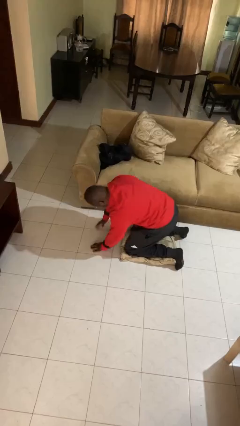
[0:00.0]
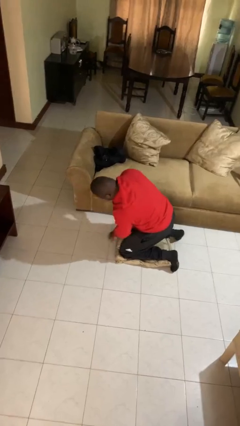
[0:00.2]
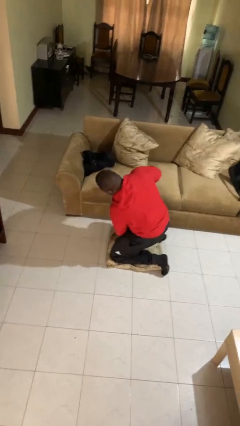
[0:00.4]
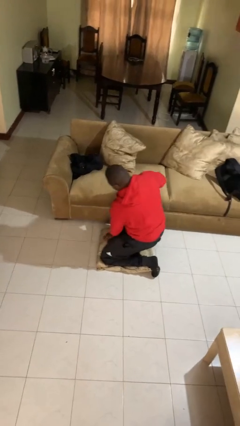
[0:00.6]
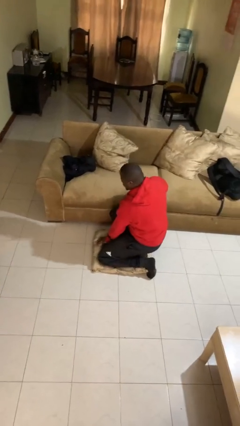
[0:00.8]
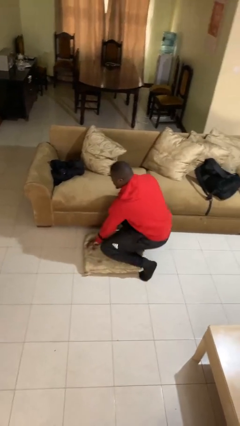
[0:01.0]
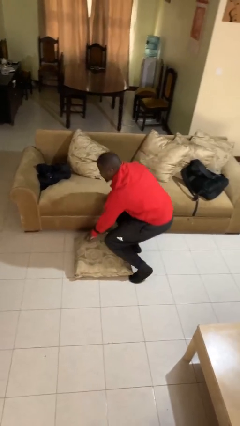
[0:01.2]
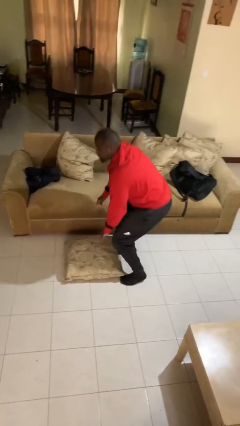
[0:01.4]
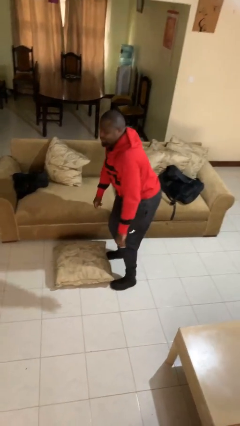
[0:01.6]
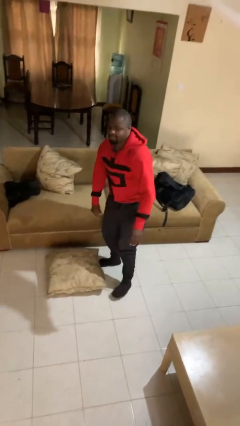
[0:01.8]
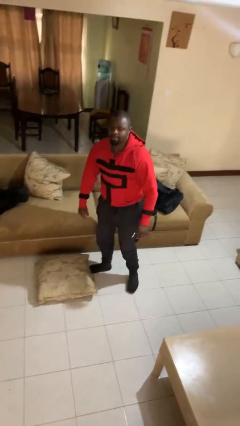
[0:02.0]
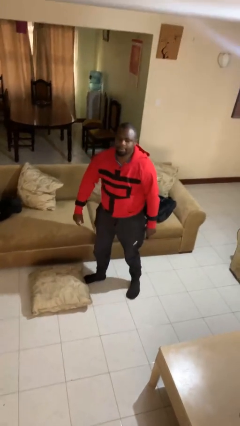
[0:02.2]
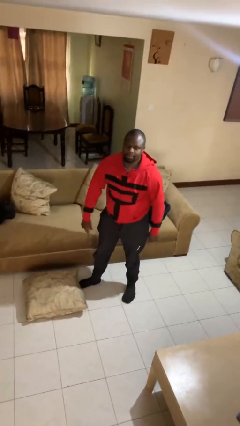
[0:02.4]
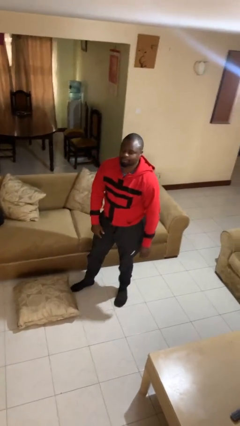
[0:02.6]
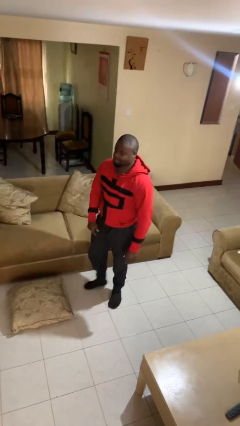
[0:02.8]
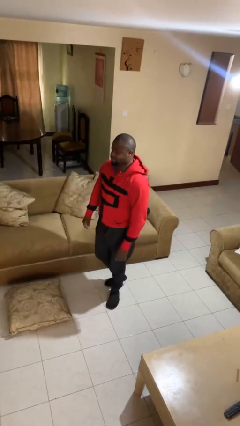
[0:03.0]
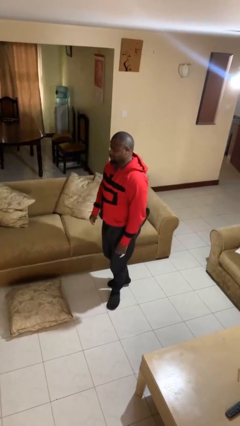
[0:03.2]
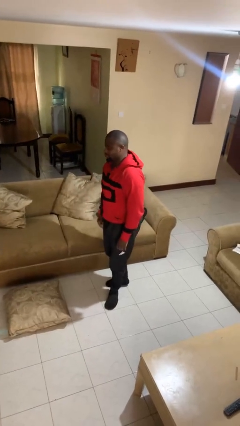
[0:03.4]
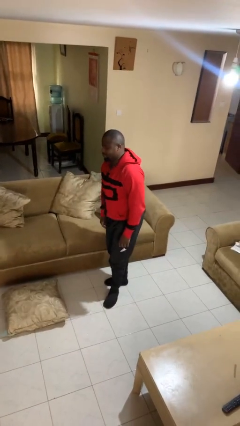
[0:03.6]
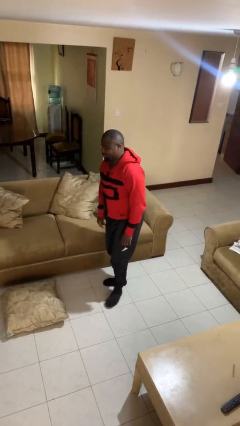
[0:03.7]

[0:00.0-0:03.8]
person stands up from floor

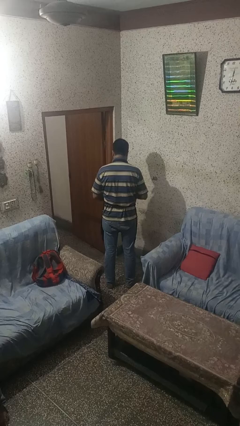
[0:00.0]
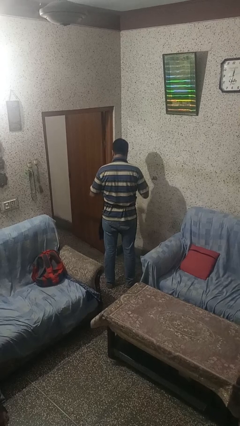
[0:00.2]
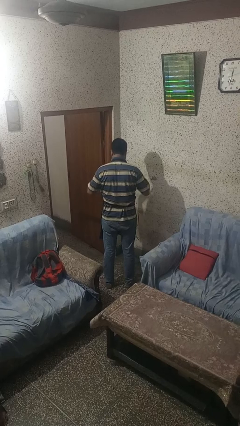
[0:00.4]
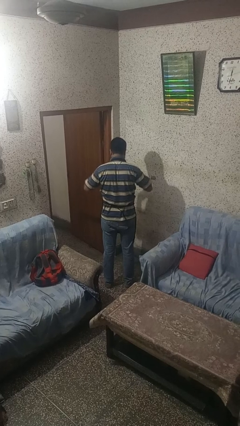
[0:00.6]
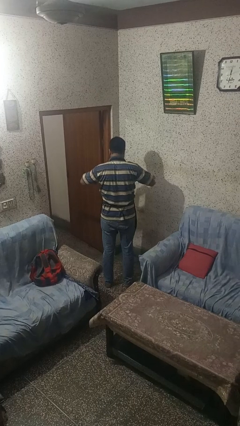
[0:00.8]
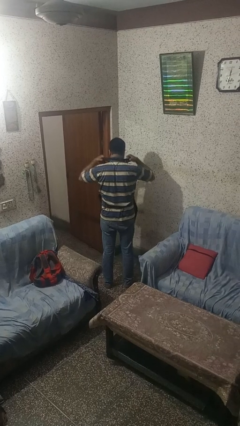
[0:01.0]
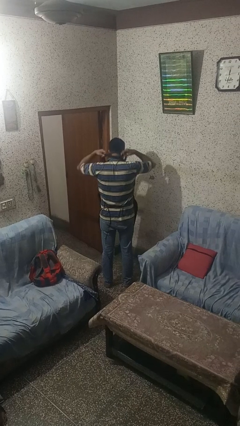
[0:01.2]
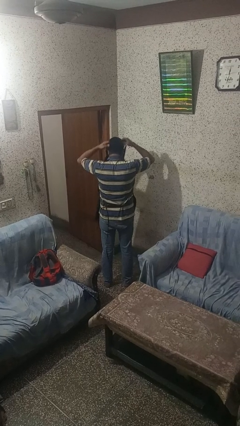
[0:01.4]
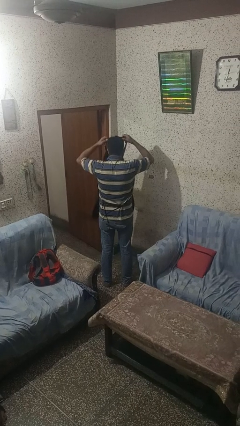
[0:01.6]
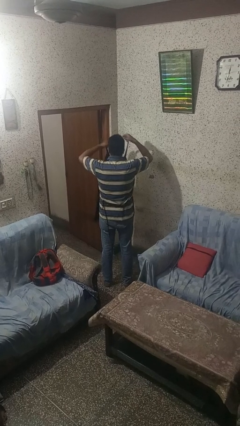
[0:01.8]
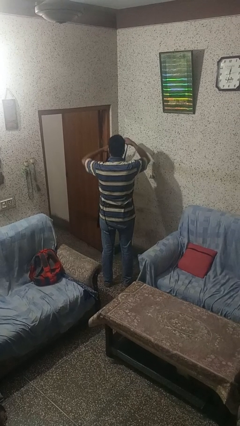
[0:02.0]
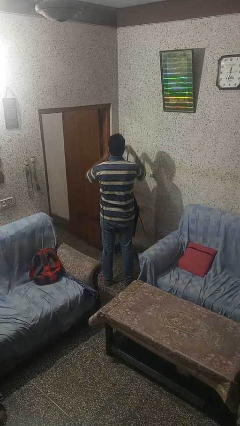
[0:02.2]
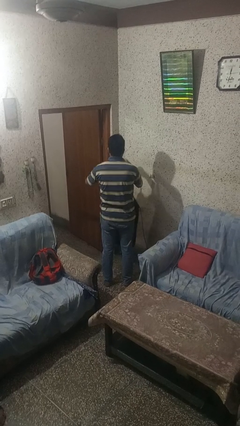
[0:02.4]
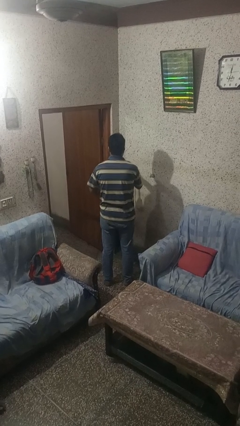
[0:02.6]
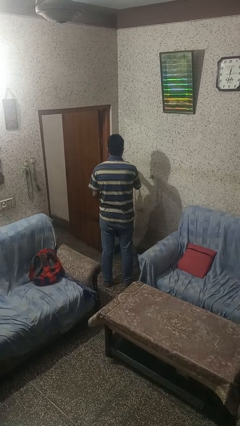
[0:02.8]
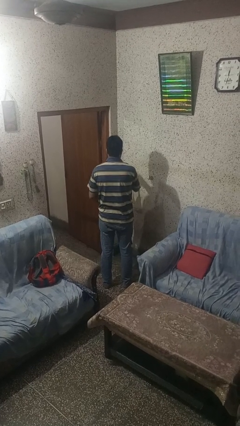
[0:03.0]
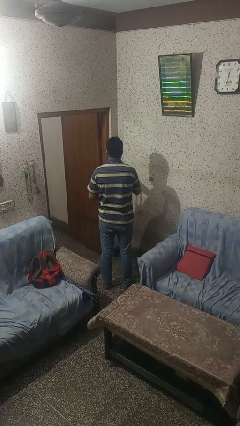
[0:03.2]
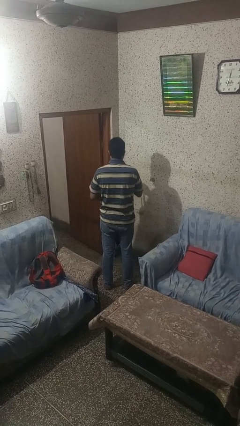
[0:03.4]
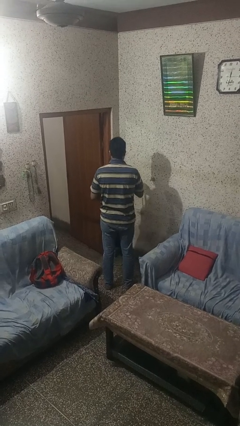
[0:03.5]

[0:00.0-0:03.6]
person takes off apron

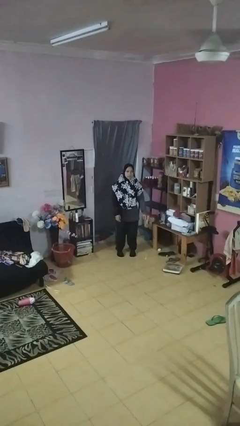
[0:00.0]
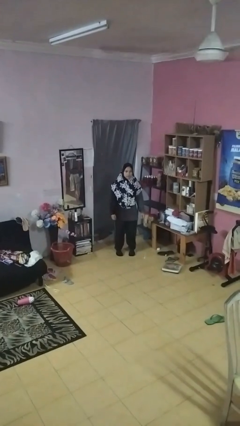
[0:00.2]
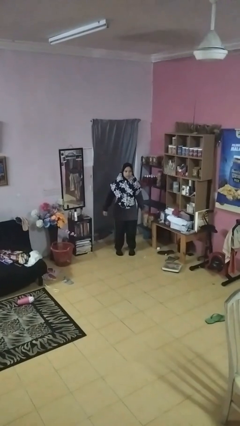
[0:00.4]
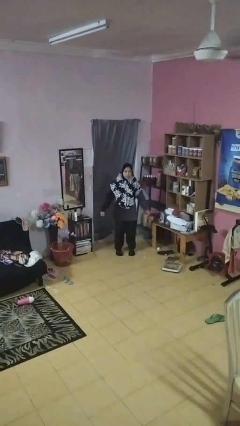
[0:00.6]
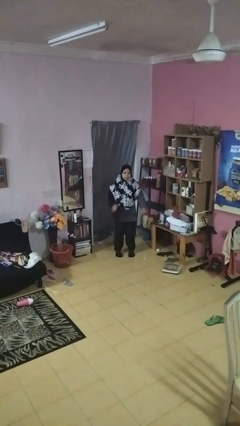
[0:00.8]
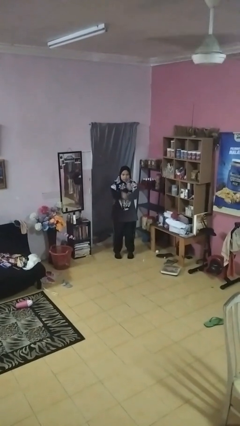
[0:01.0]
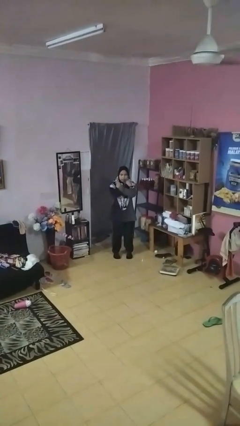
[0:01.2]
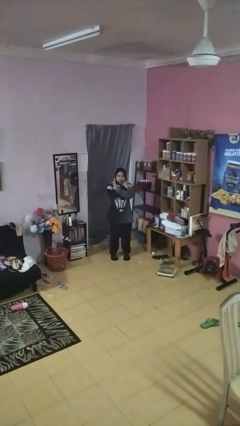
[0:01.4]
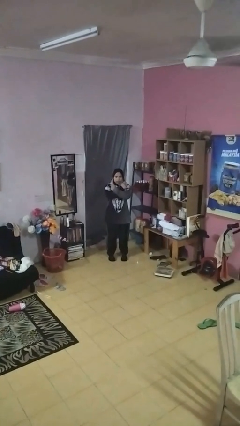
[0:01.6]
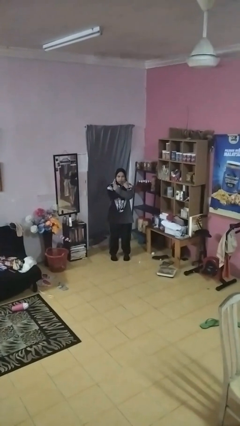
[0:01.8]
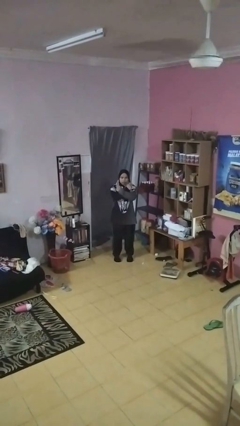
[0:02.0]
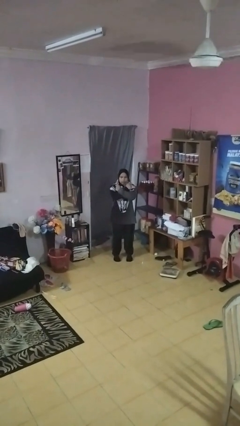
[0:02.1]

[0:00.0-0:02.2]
person crosses arms

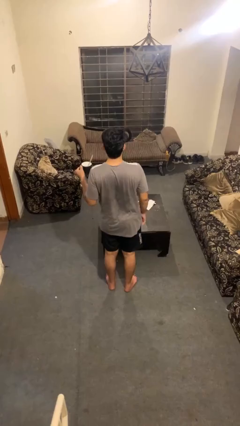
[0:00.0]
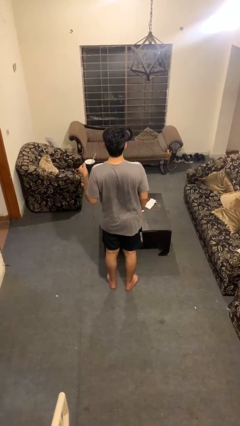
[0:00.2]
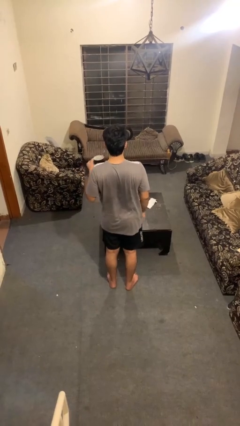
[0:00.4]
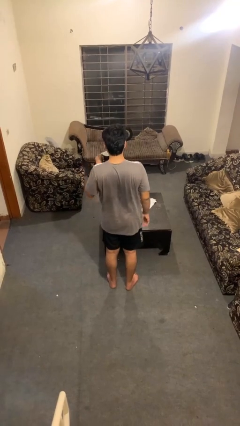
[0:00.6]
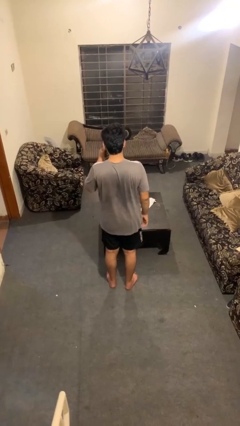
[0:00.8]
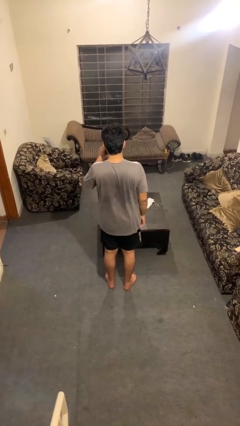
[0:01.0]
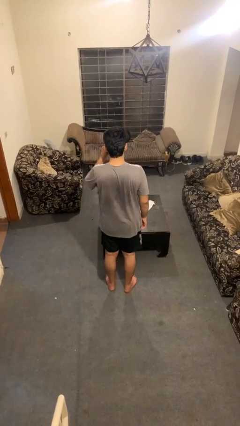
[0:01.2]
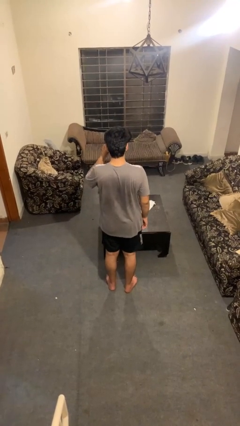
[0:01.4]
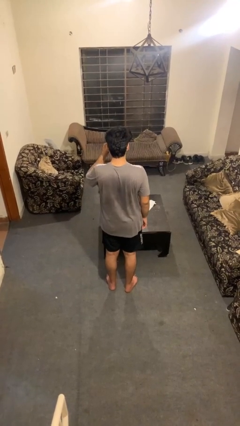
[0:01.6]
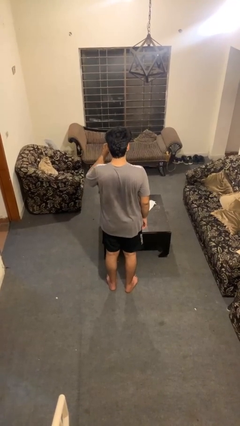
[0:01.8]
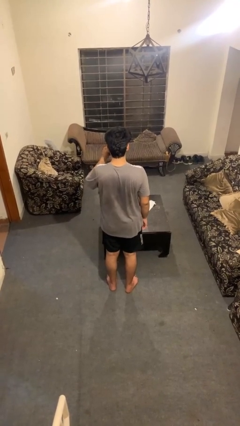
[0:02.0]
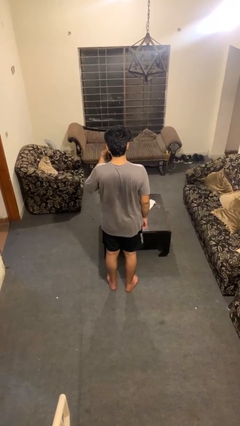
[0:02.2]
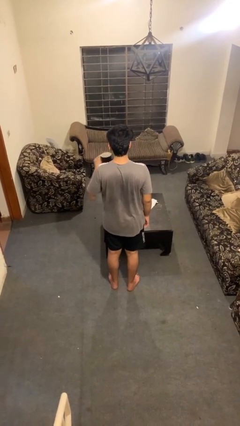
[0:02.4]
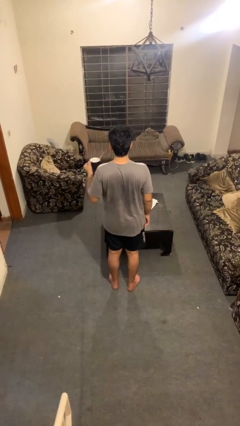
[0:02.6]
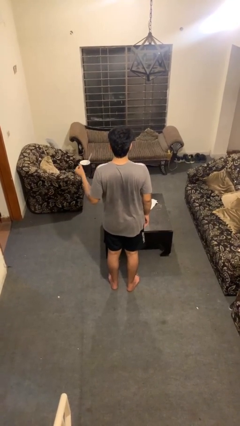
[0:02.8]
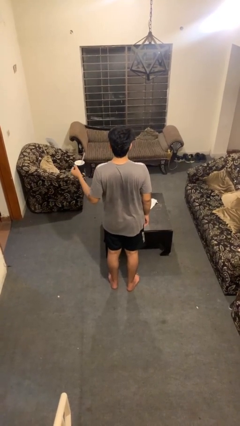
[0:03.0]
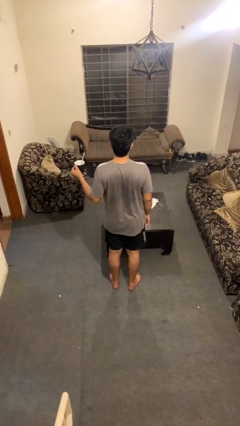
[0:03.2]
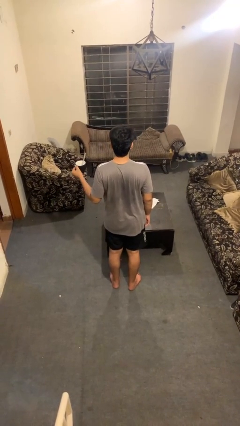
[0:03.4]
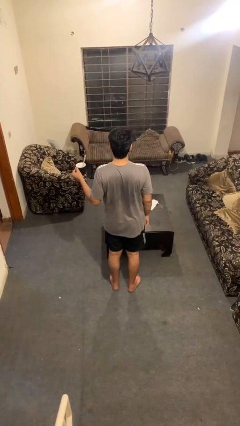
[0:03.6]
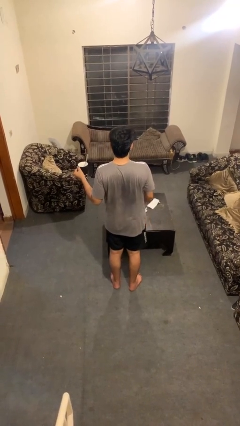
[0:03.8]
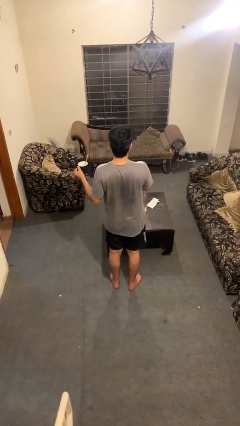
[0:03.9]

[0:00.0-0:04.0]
person drinks from mug

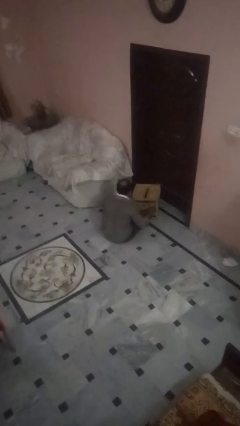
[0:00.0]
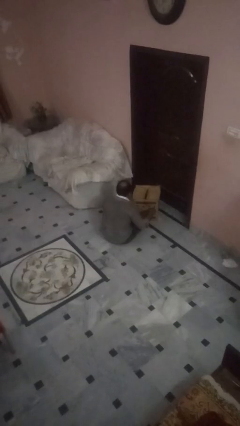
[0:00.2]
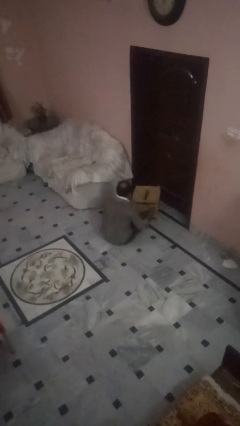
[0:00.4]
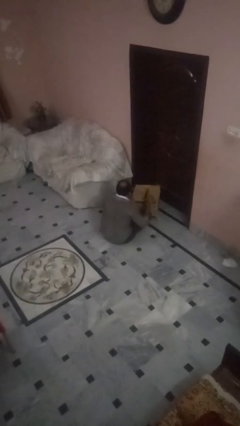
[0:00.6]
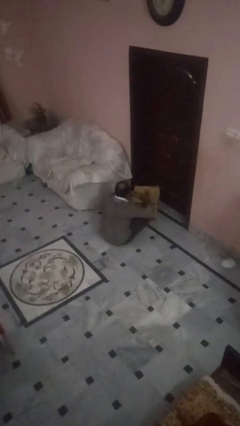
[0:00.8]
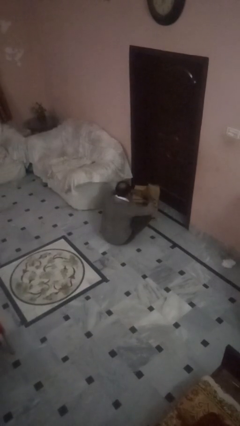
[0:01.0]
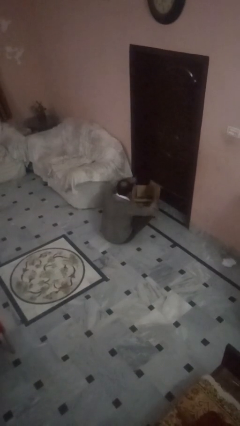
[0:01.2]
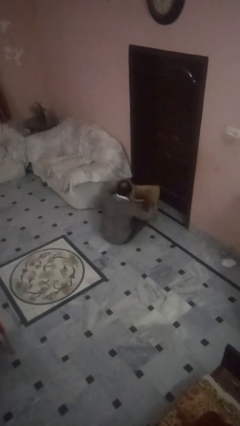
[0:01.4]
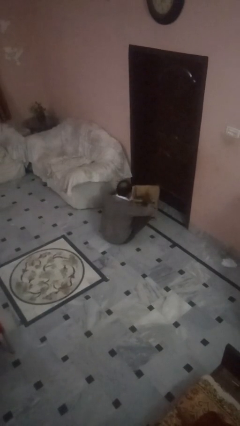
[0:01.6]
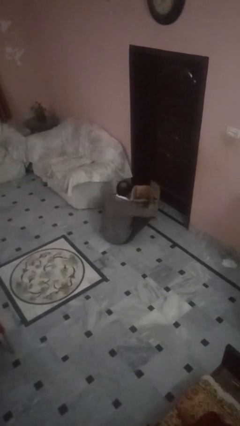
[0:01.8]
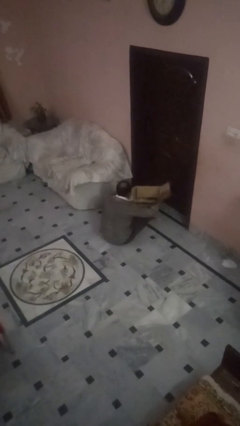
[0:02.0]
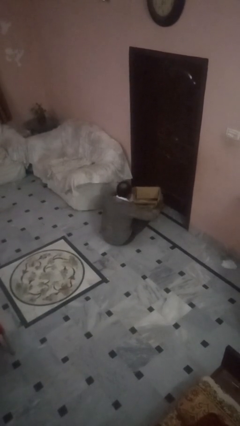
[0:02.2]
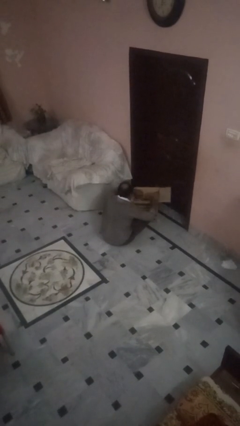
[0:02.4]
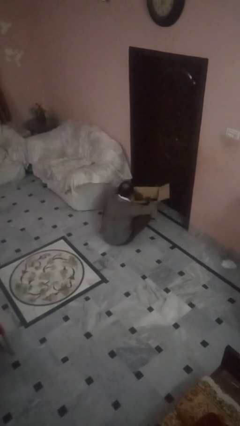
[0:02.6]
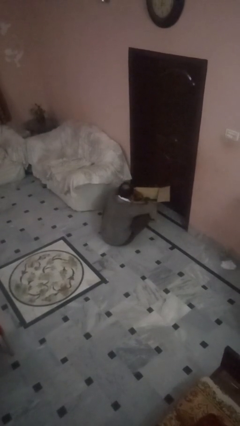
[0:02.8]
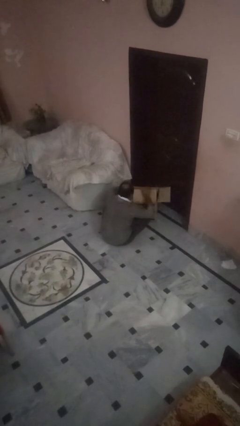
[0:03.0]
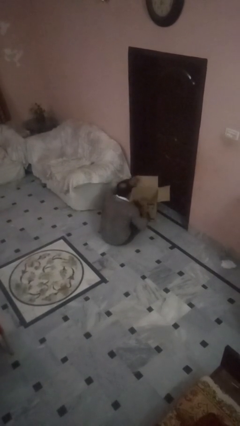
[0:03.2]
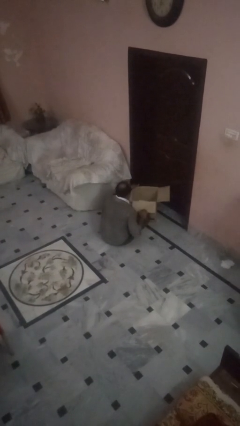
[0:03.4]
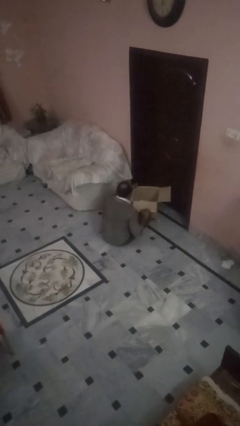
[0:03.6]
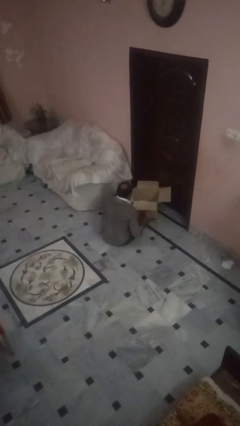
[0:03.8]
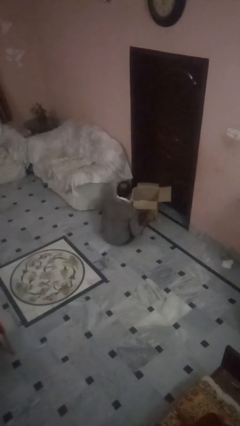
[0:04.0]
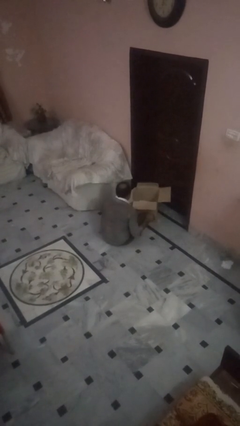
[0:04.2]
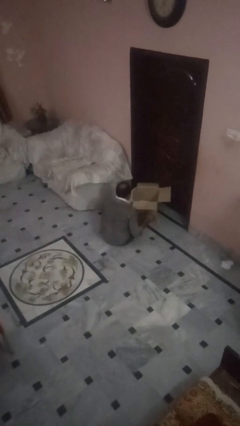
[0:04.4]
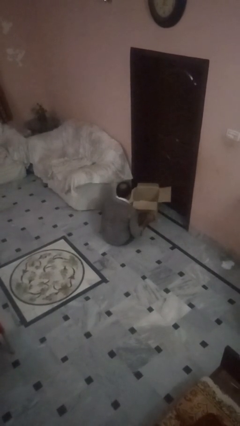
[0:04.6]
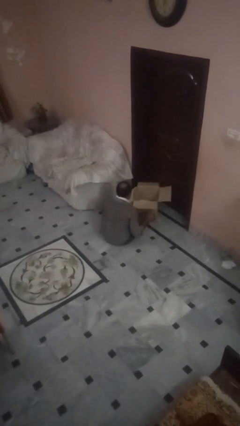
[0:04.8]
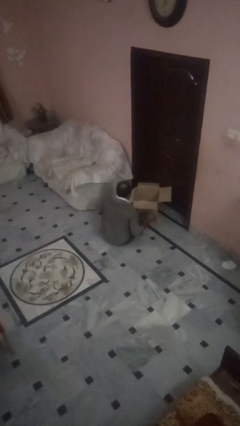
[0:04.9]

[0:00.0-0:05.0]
person opens box
